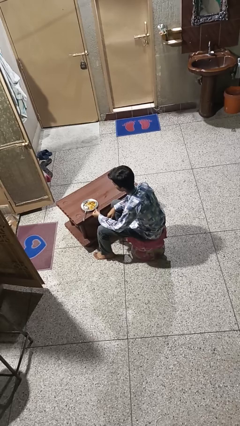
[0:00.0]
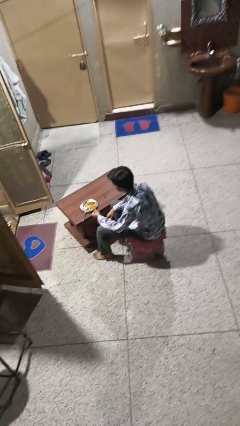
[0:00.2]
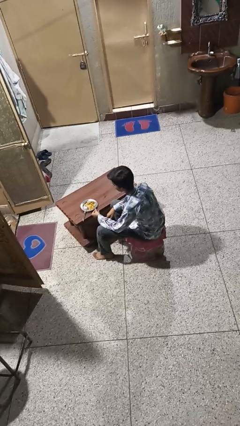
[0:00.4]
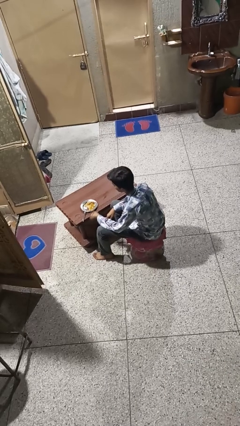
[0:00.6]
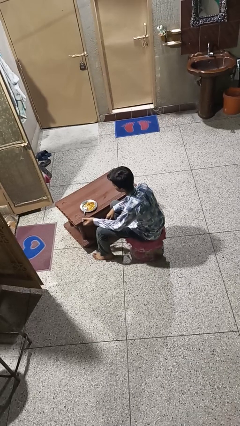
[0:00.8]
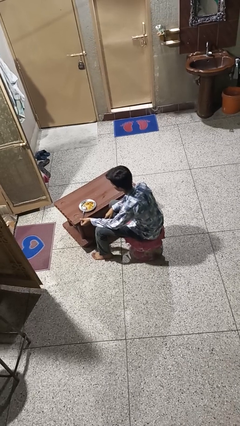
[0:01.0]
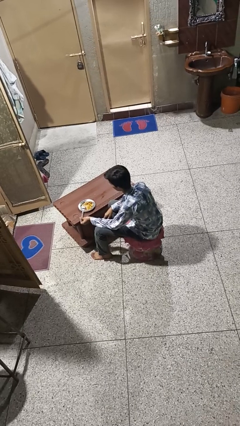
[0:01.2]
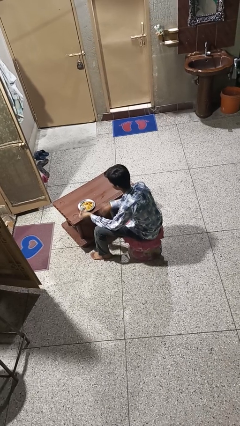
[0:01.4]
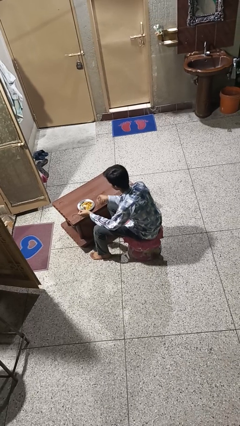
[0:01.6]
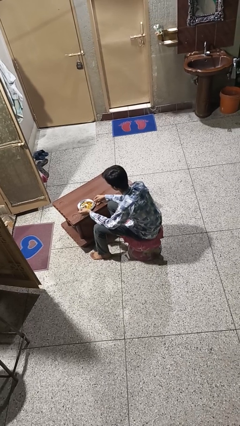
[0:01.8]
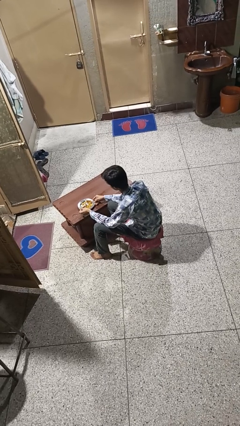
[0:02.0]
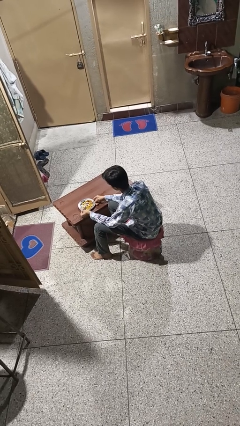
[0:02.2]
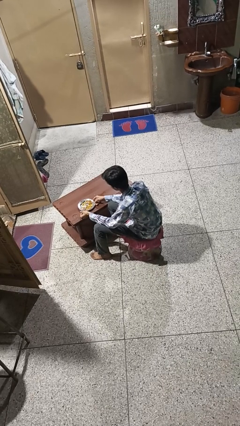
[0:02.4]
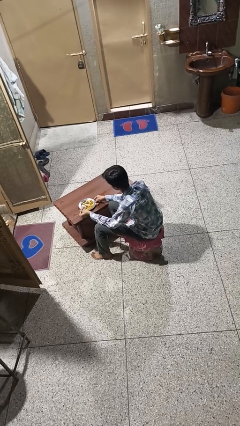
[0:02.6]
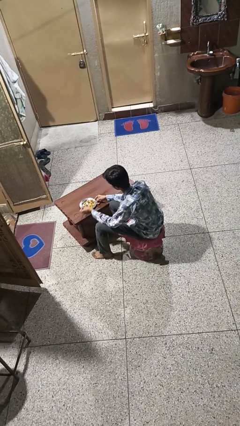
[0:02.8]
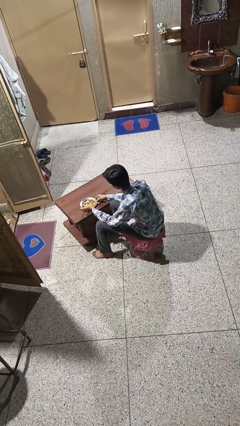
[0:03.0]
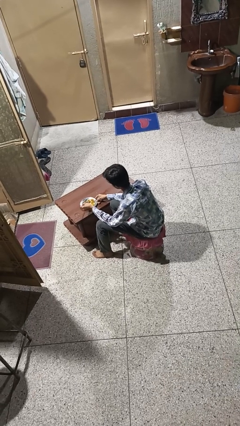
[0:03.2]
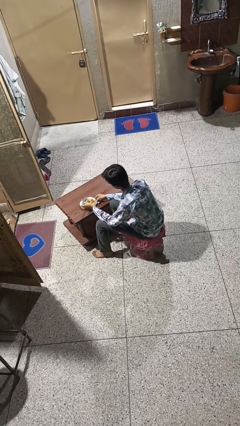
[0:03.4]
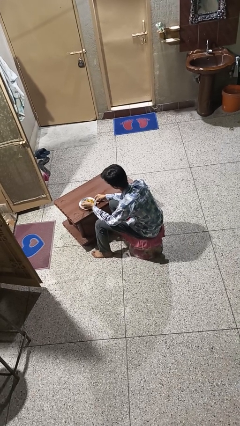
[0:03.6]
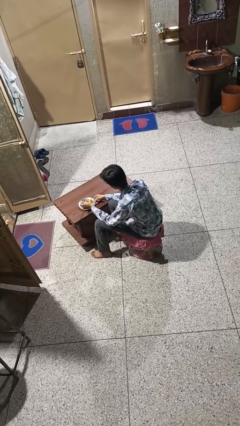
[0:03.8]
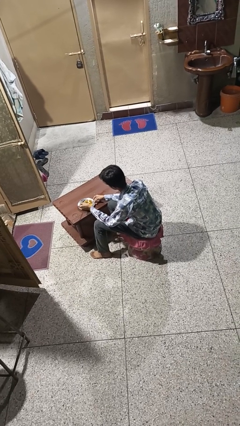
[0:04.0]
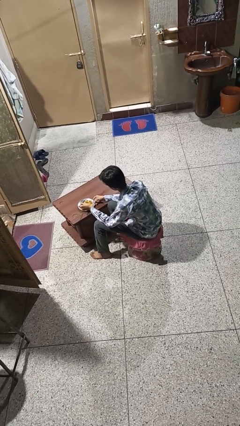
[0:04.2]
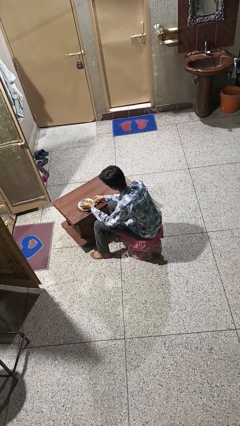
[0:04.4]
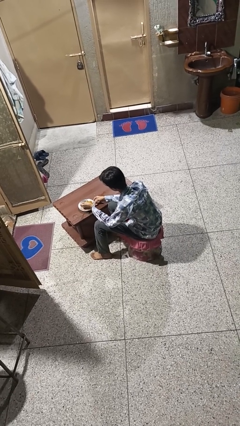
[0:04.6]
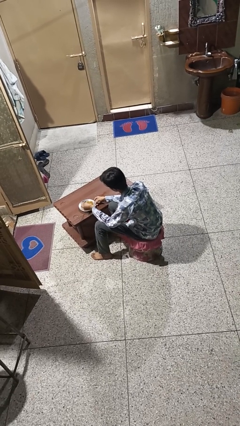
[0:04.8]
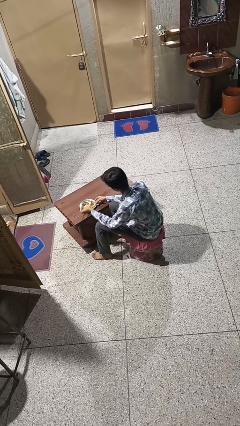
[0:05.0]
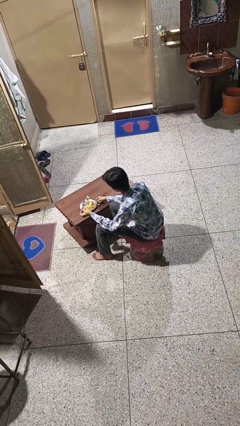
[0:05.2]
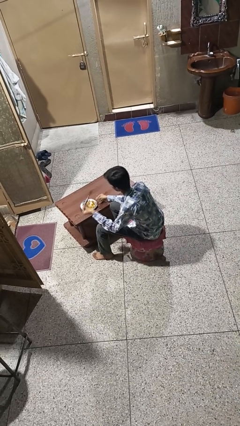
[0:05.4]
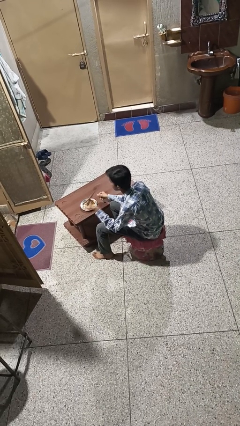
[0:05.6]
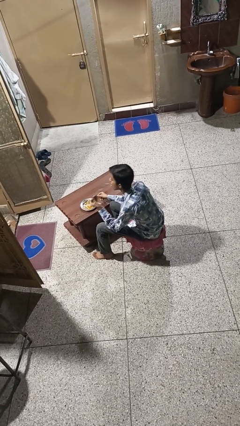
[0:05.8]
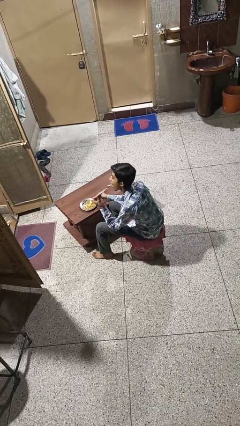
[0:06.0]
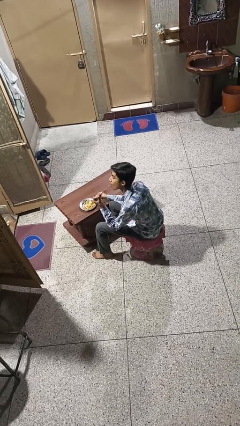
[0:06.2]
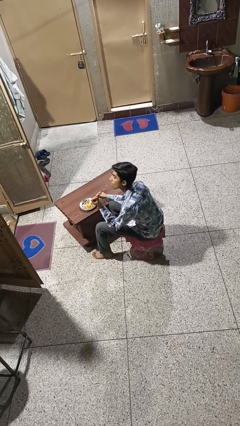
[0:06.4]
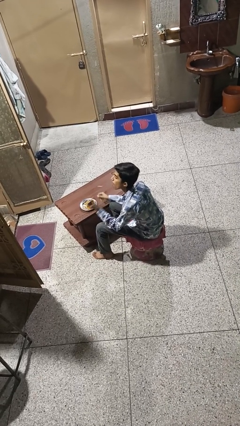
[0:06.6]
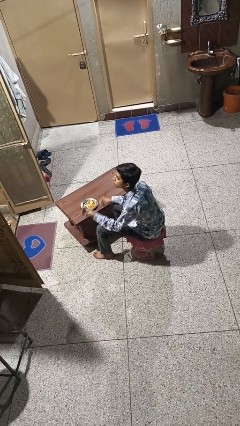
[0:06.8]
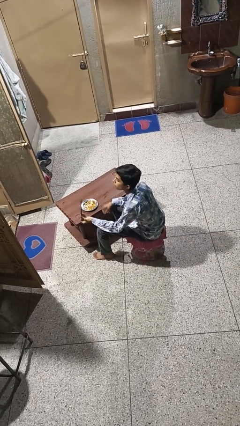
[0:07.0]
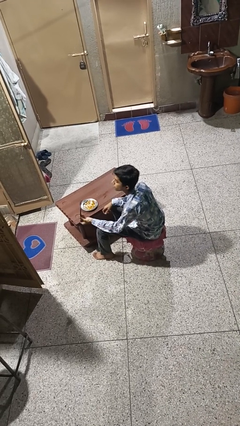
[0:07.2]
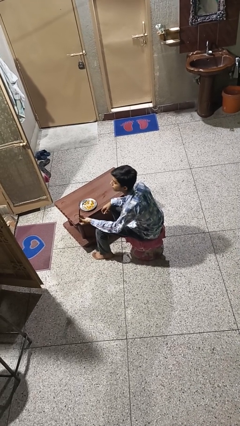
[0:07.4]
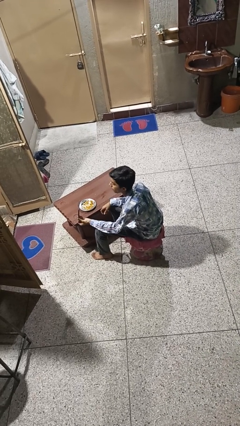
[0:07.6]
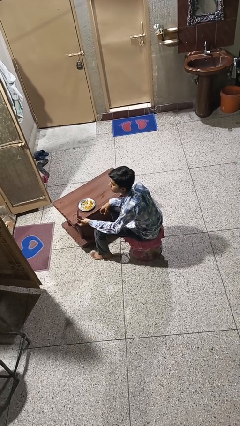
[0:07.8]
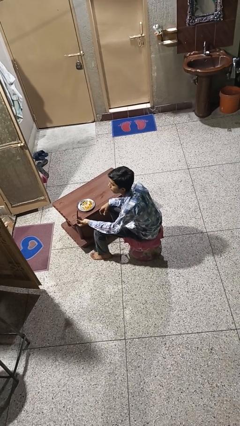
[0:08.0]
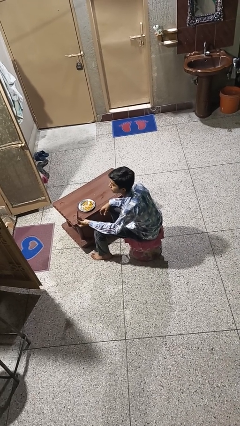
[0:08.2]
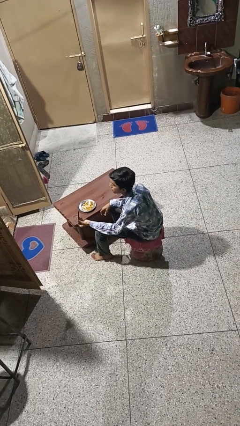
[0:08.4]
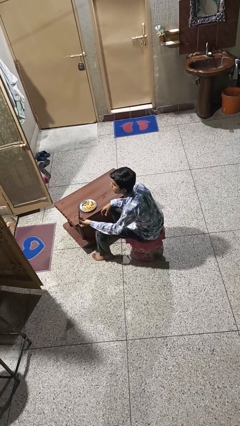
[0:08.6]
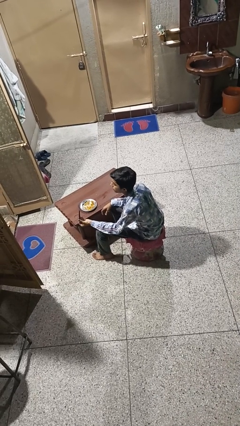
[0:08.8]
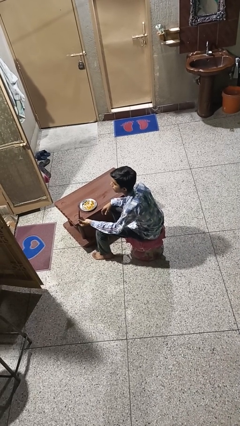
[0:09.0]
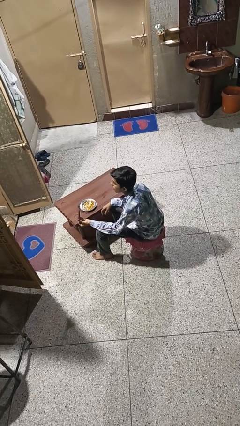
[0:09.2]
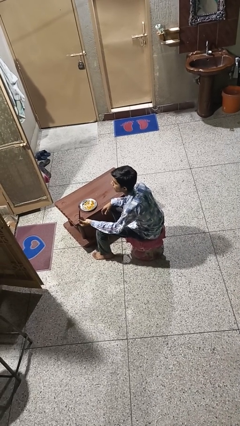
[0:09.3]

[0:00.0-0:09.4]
person eats with utensil

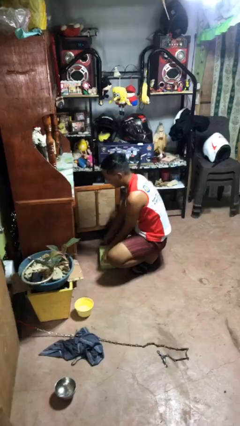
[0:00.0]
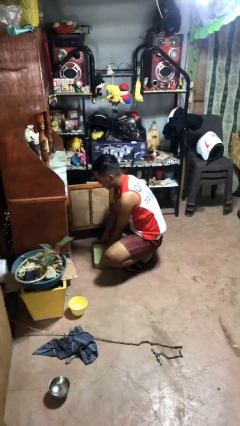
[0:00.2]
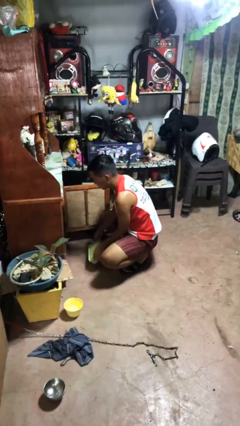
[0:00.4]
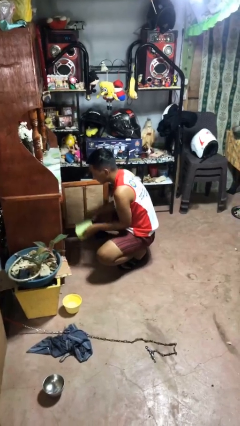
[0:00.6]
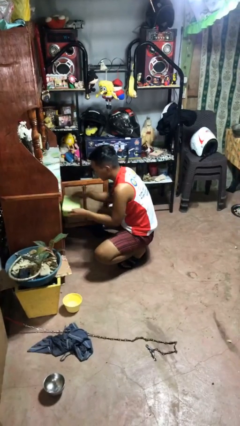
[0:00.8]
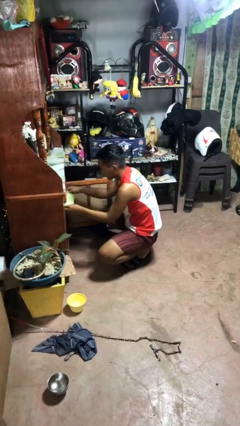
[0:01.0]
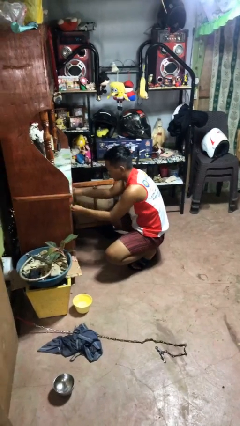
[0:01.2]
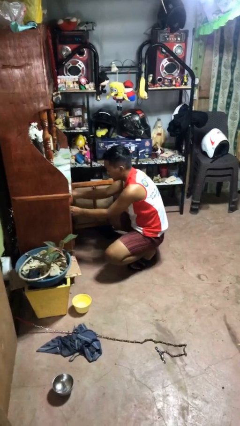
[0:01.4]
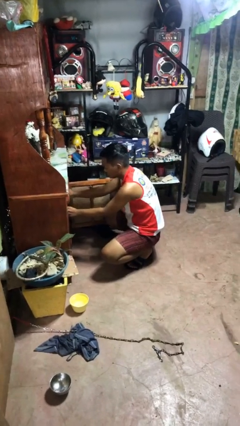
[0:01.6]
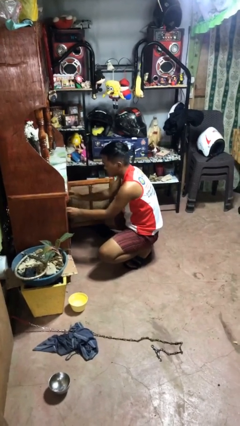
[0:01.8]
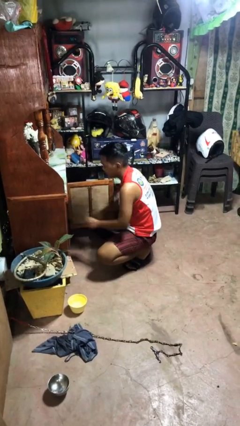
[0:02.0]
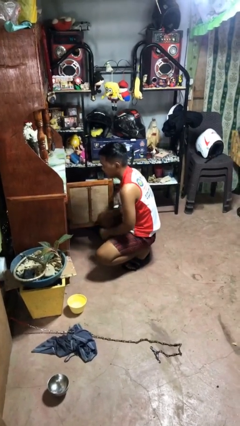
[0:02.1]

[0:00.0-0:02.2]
person puts object in cabinet

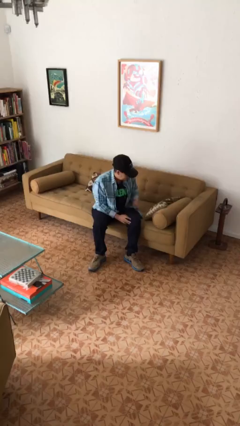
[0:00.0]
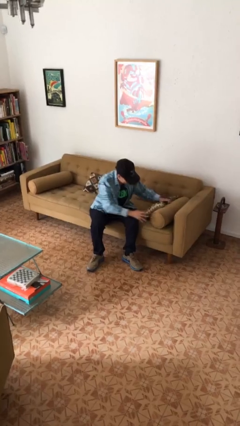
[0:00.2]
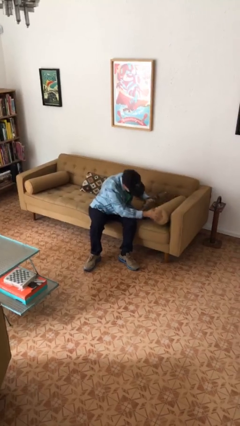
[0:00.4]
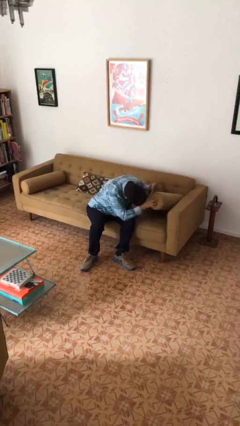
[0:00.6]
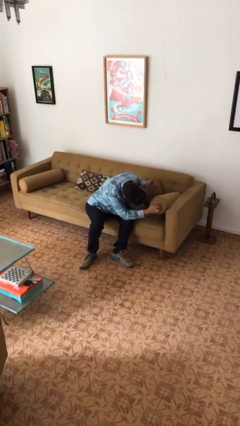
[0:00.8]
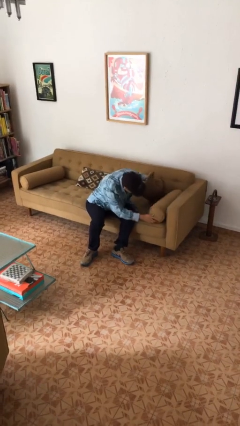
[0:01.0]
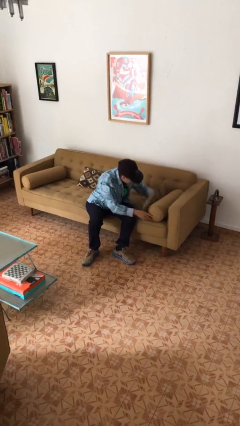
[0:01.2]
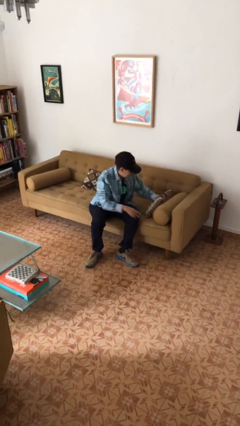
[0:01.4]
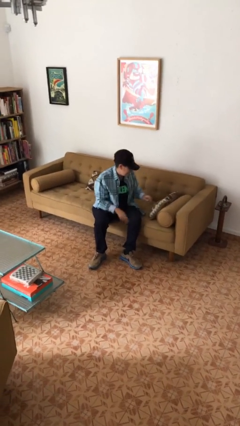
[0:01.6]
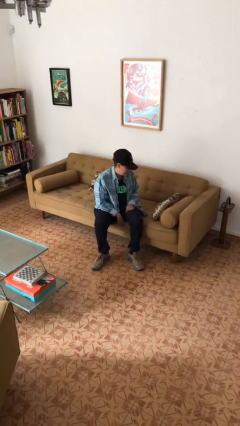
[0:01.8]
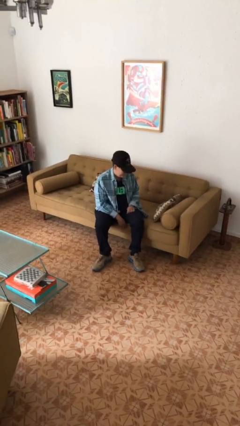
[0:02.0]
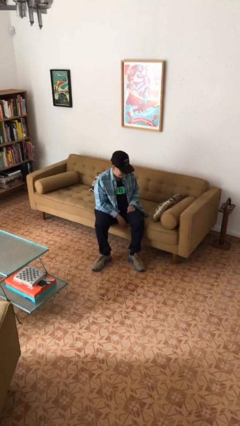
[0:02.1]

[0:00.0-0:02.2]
person searches in couch

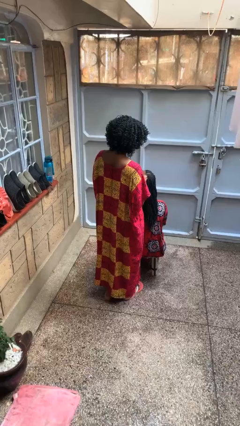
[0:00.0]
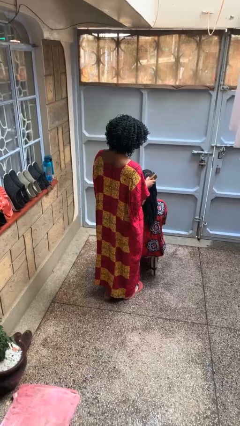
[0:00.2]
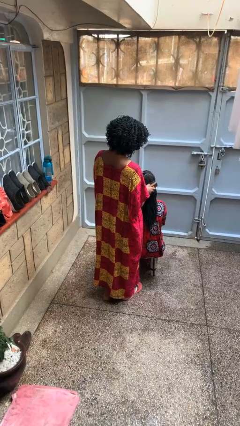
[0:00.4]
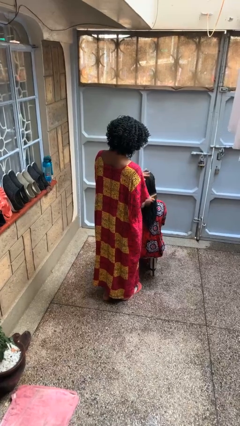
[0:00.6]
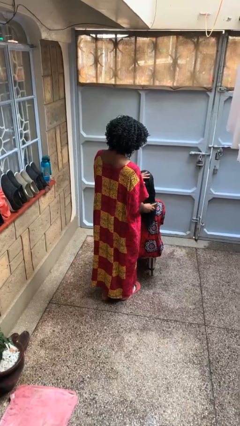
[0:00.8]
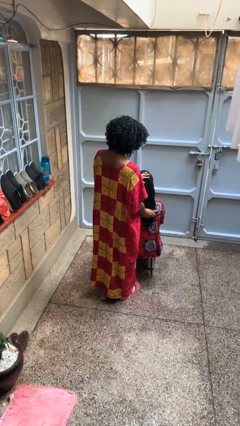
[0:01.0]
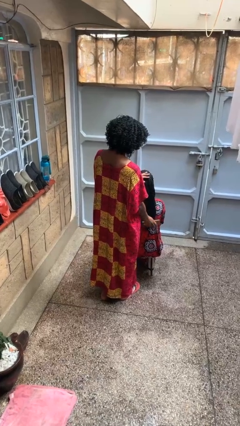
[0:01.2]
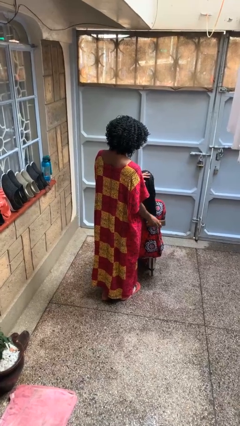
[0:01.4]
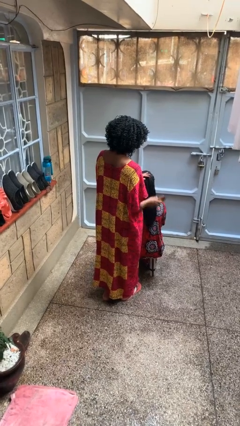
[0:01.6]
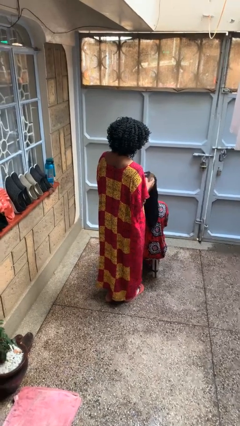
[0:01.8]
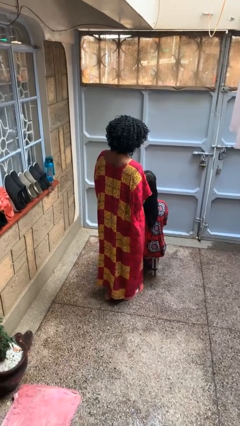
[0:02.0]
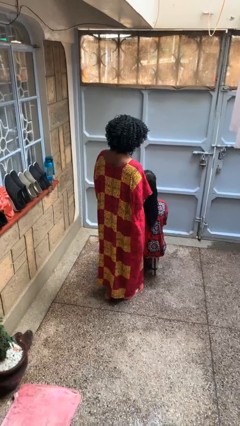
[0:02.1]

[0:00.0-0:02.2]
person brushes hair of person

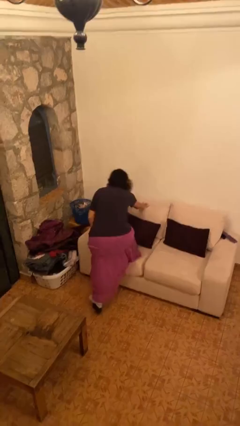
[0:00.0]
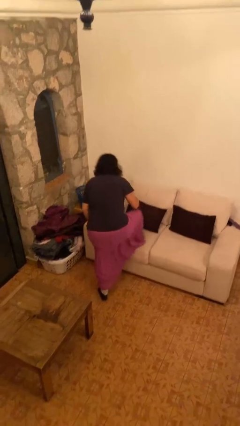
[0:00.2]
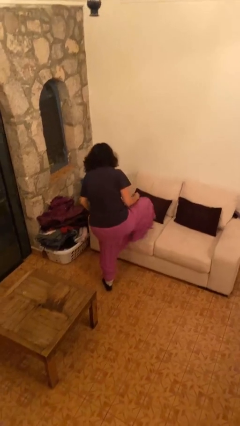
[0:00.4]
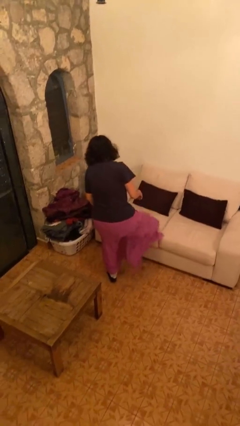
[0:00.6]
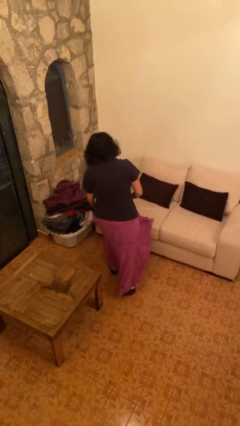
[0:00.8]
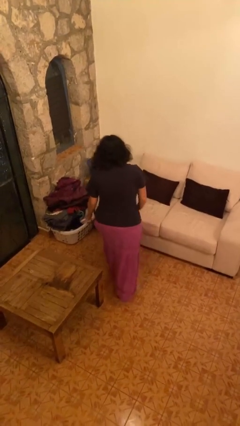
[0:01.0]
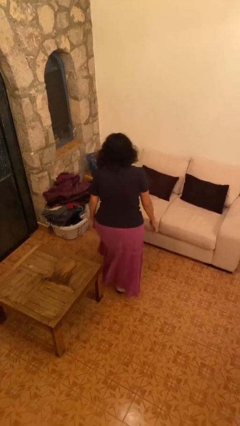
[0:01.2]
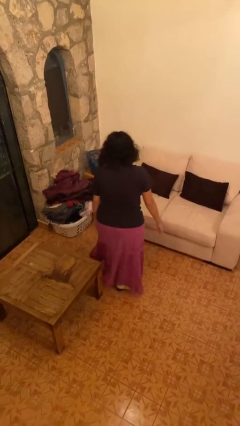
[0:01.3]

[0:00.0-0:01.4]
person climbs off couch
